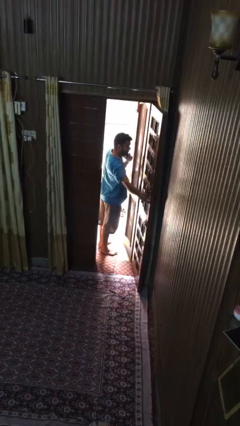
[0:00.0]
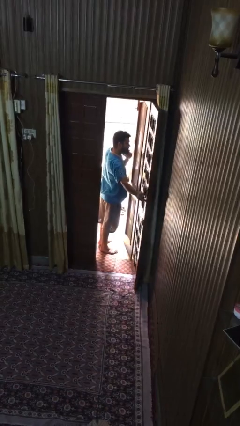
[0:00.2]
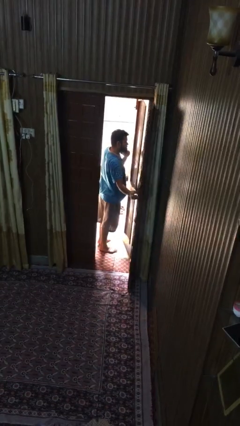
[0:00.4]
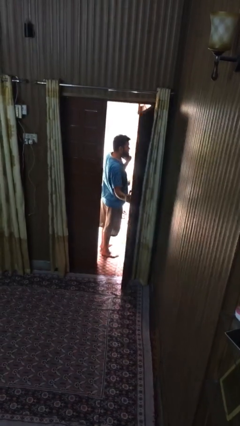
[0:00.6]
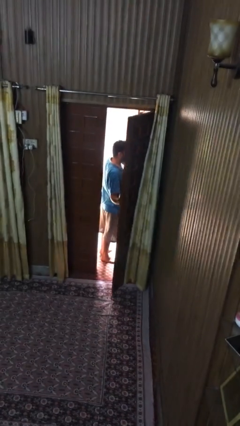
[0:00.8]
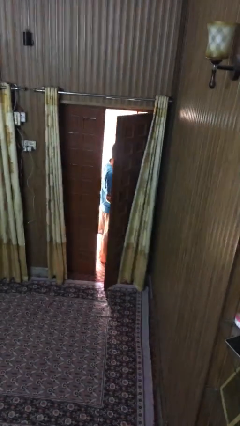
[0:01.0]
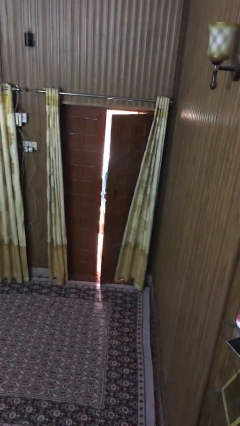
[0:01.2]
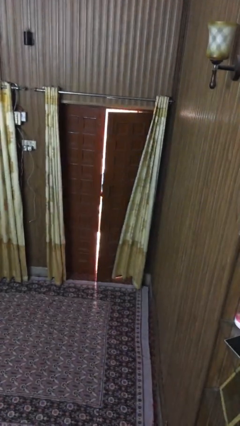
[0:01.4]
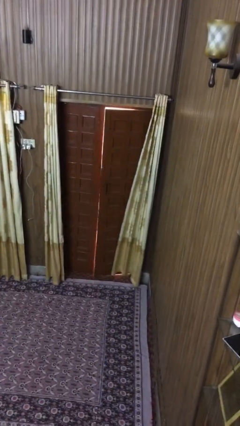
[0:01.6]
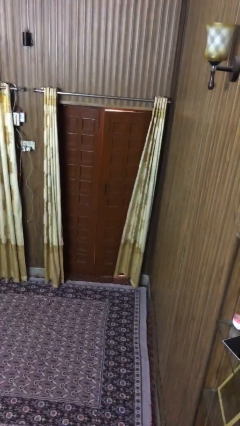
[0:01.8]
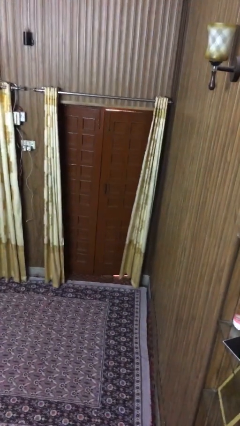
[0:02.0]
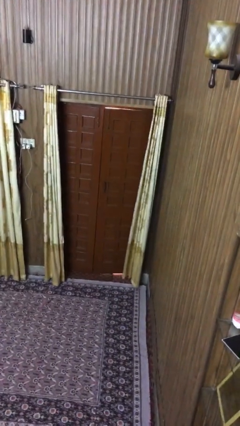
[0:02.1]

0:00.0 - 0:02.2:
person closes facility door

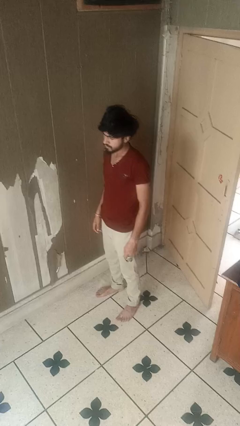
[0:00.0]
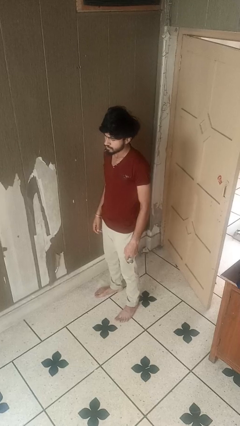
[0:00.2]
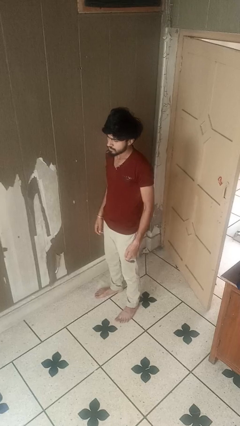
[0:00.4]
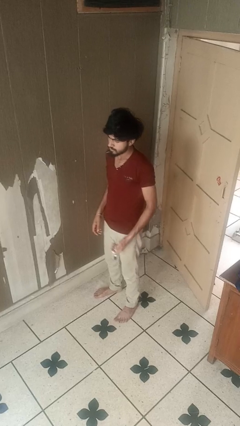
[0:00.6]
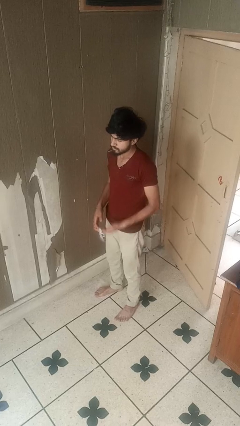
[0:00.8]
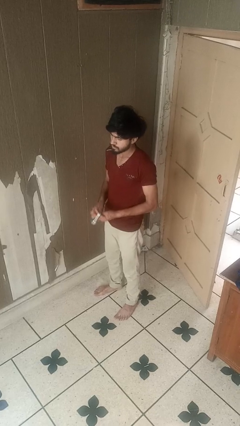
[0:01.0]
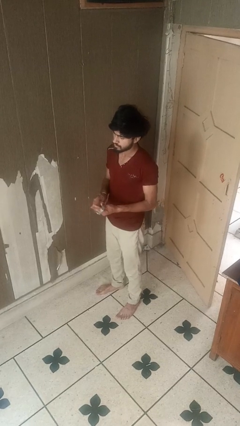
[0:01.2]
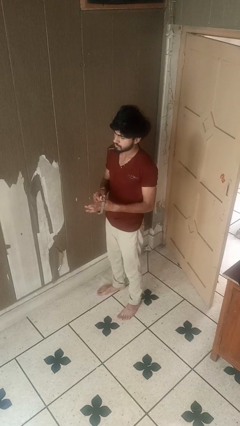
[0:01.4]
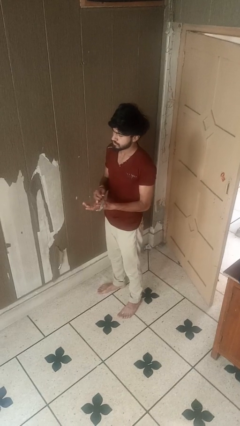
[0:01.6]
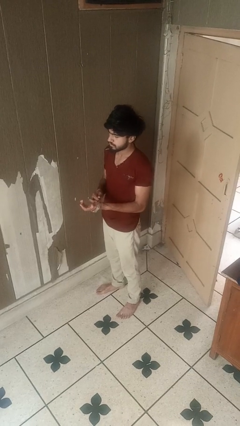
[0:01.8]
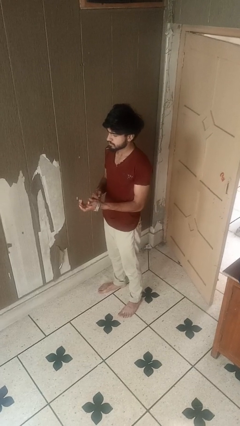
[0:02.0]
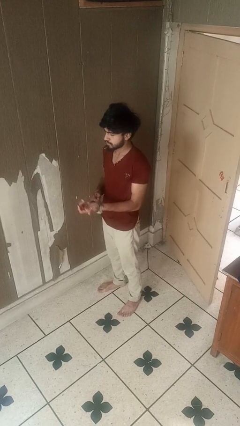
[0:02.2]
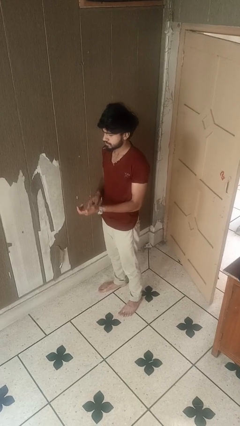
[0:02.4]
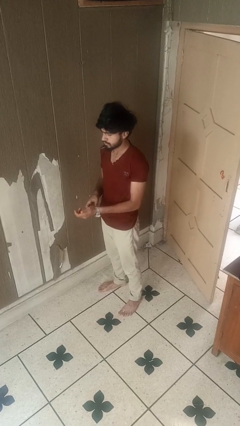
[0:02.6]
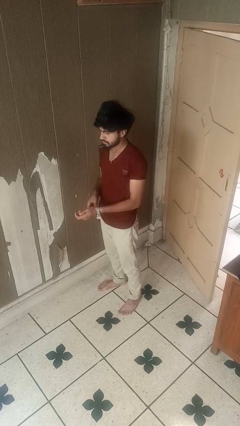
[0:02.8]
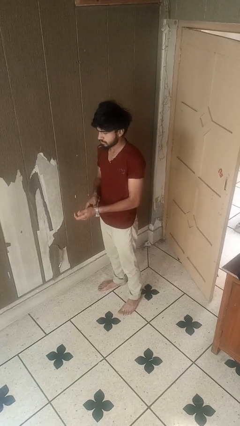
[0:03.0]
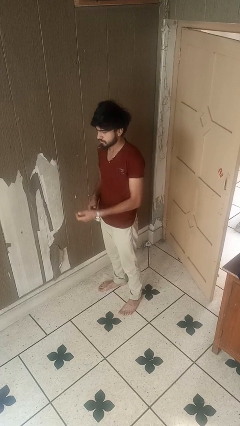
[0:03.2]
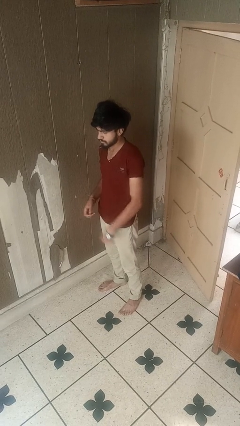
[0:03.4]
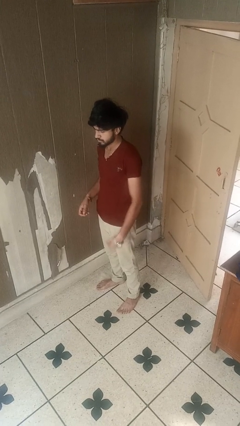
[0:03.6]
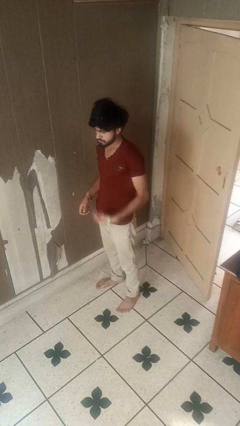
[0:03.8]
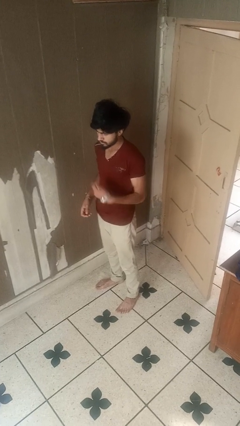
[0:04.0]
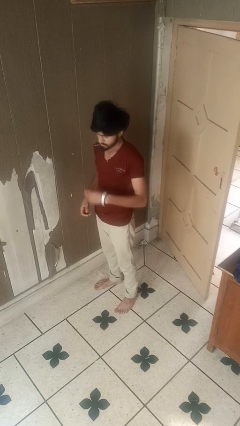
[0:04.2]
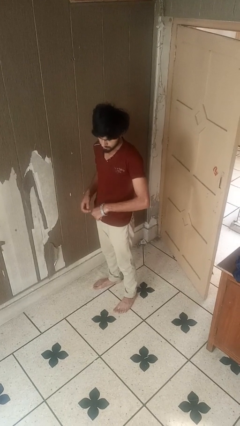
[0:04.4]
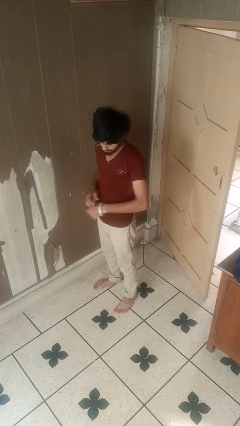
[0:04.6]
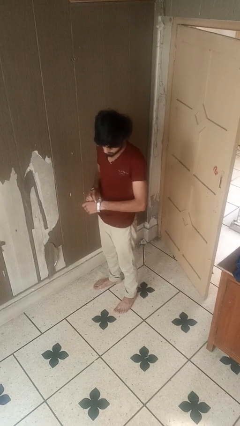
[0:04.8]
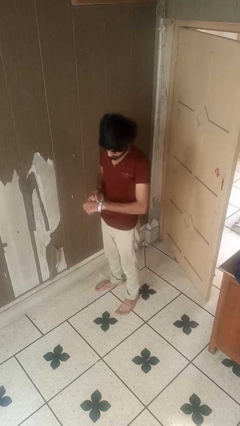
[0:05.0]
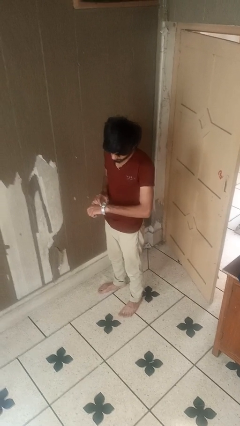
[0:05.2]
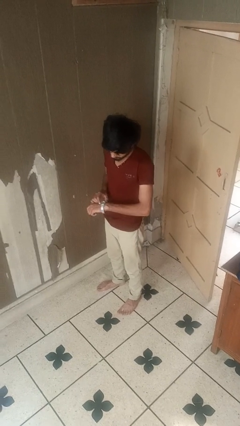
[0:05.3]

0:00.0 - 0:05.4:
person puts on wristwatch

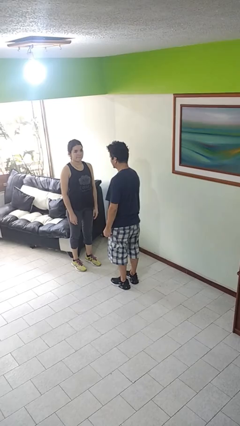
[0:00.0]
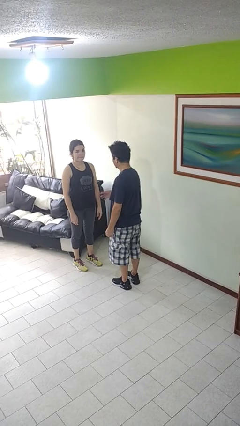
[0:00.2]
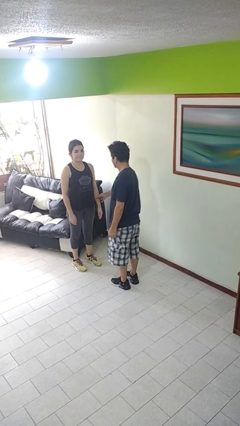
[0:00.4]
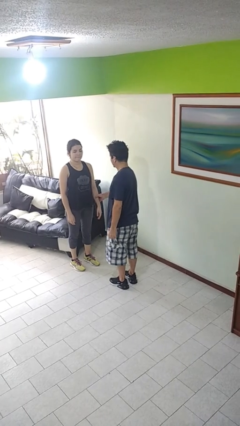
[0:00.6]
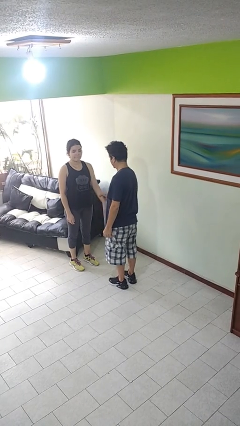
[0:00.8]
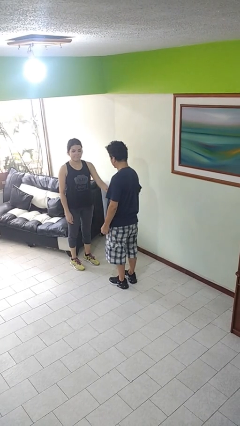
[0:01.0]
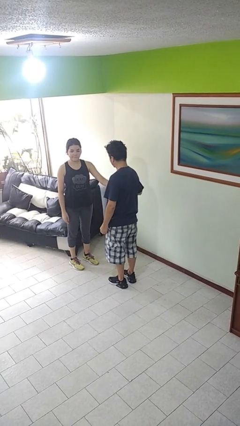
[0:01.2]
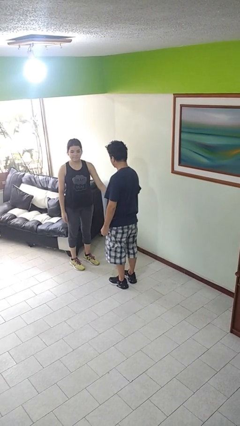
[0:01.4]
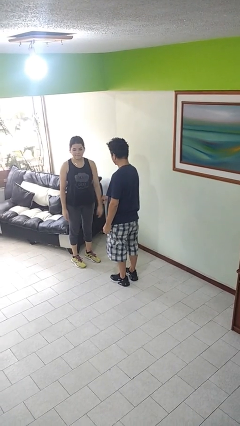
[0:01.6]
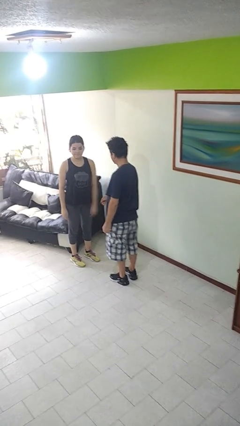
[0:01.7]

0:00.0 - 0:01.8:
person grabs person by forearm

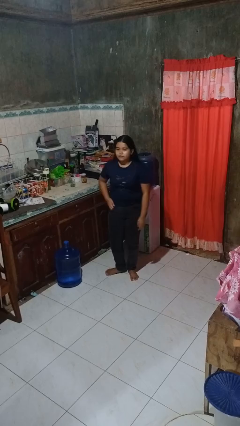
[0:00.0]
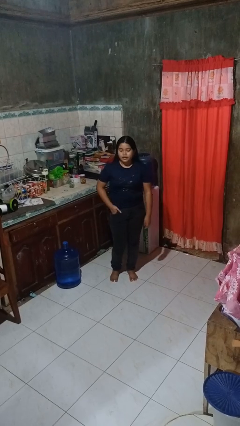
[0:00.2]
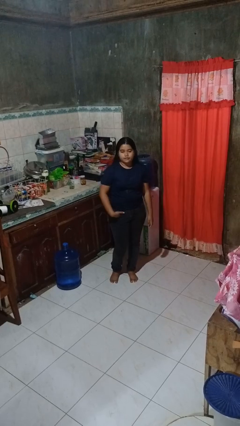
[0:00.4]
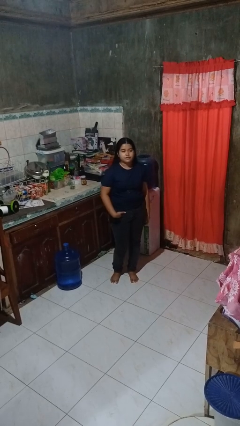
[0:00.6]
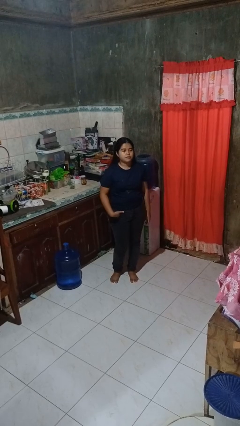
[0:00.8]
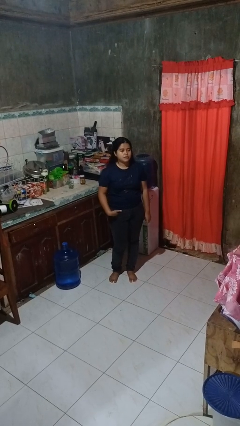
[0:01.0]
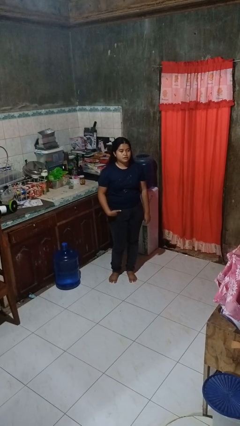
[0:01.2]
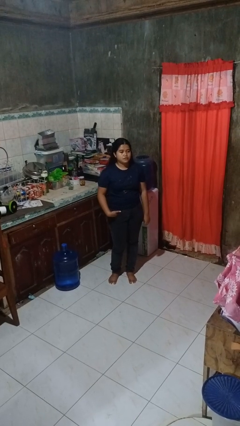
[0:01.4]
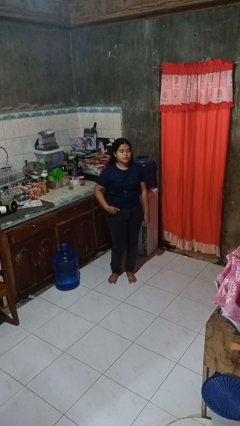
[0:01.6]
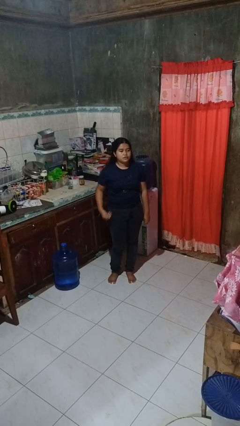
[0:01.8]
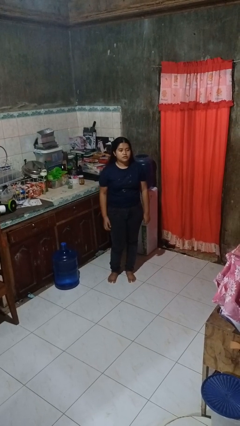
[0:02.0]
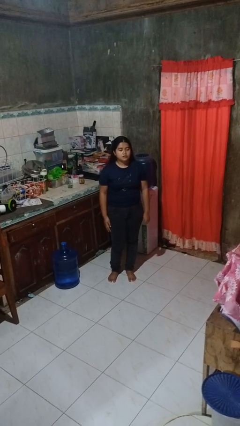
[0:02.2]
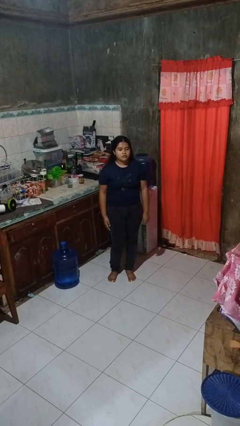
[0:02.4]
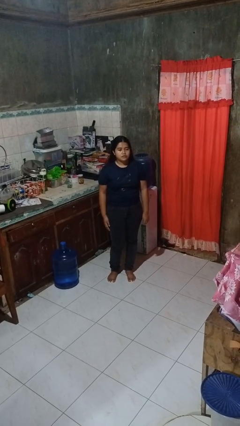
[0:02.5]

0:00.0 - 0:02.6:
person puts hands in back pockets

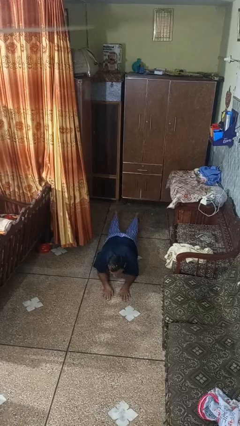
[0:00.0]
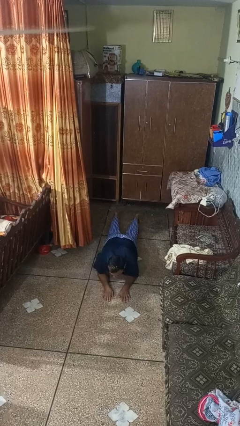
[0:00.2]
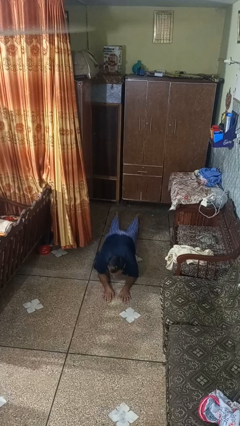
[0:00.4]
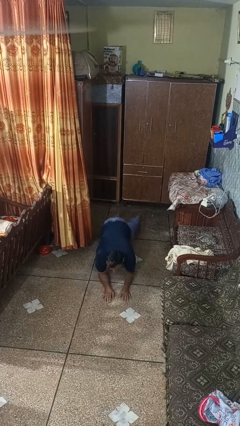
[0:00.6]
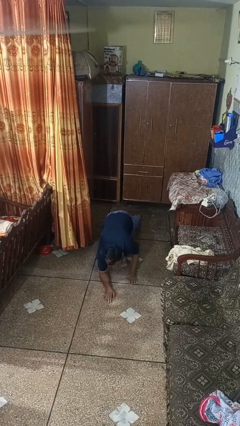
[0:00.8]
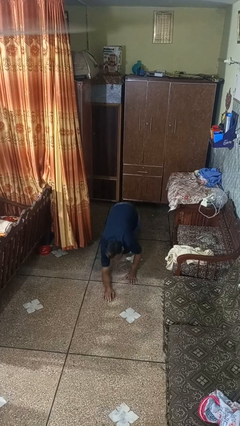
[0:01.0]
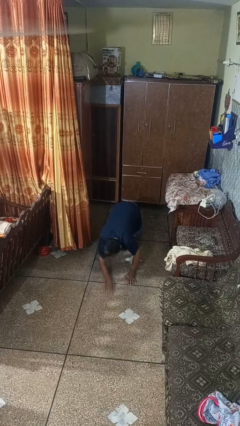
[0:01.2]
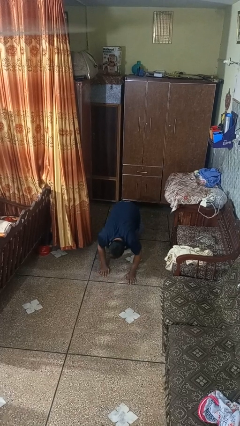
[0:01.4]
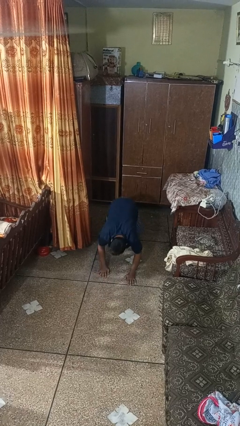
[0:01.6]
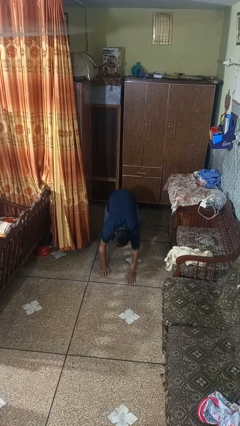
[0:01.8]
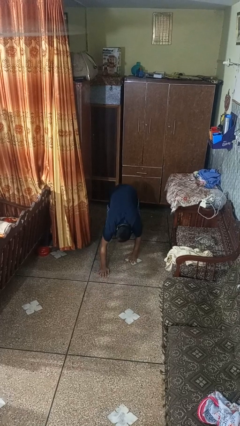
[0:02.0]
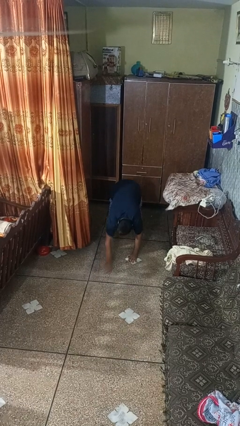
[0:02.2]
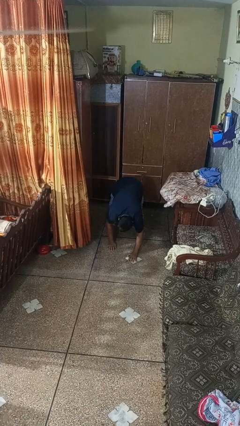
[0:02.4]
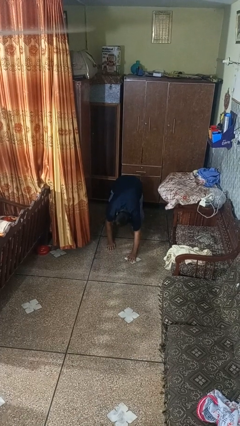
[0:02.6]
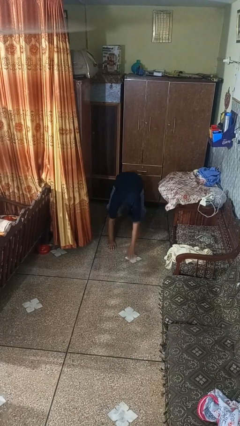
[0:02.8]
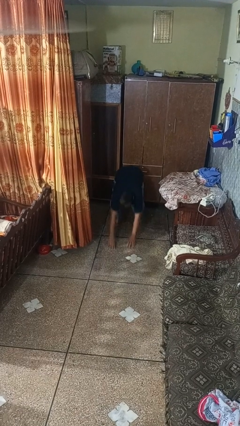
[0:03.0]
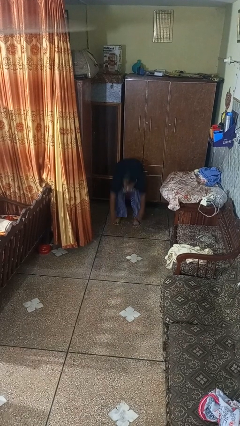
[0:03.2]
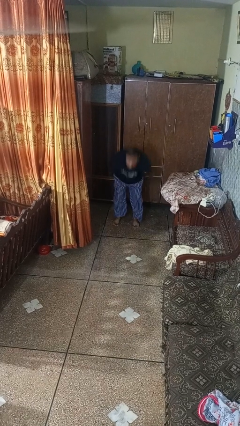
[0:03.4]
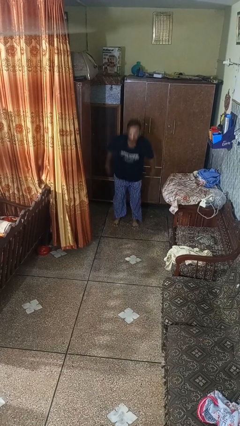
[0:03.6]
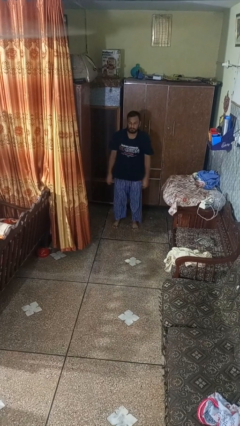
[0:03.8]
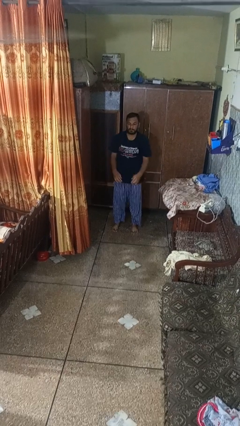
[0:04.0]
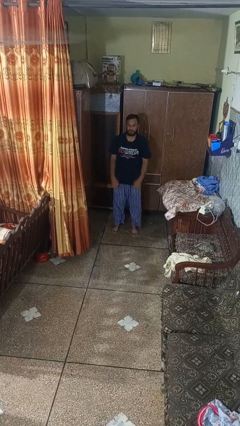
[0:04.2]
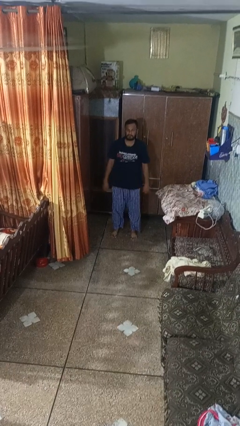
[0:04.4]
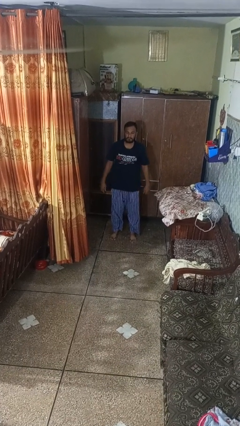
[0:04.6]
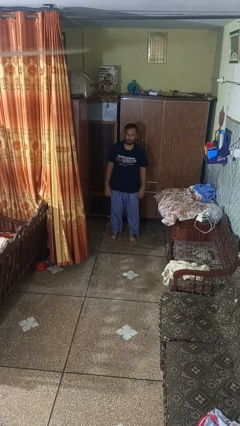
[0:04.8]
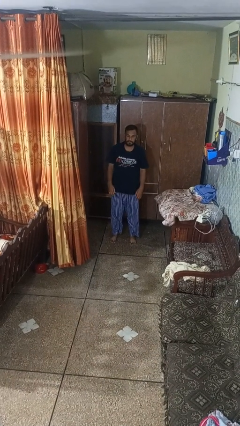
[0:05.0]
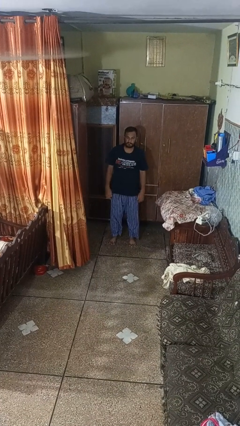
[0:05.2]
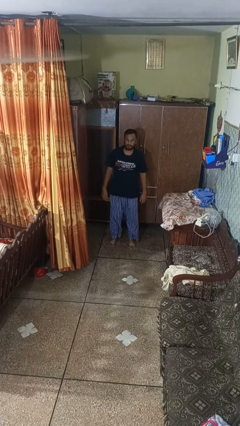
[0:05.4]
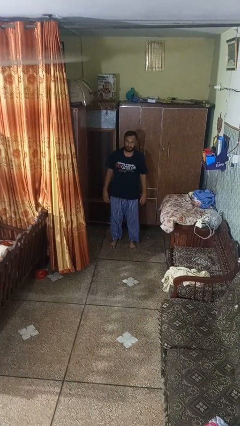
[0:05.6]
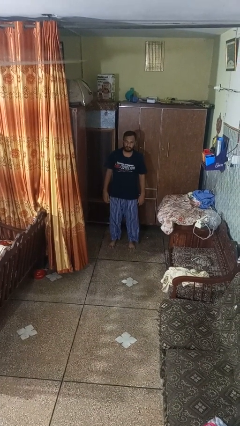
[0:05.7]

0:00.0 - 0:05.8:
person stands up from floor
